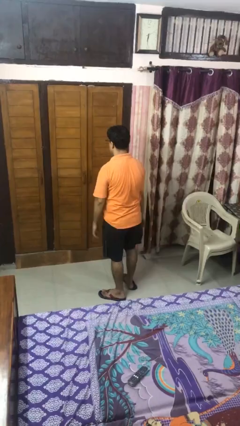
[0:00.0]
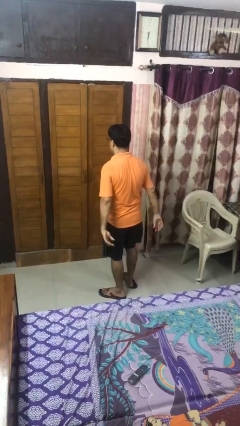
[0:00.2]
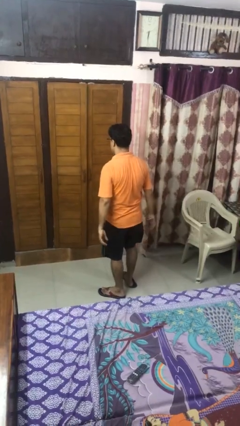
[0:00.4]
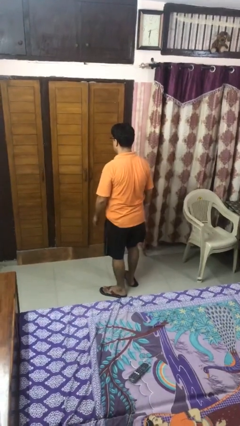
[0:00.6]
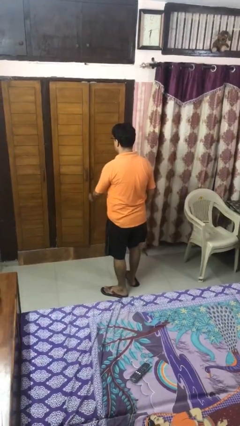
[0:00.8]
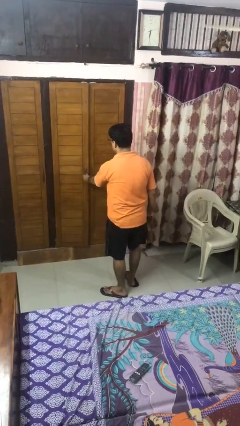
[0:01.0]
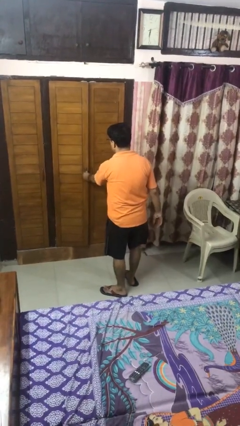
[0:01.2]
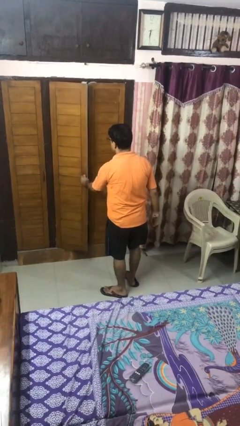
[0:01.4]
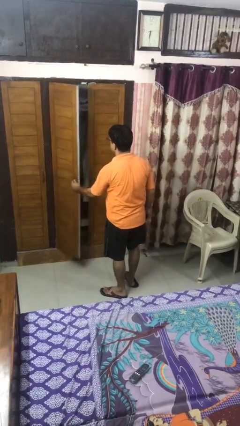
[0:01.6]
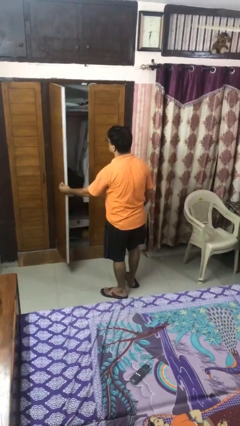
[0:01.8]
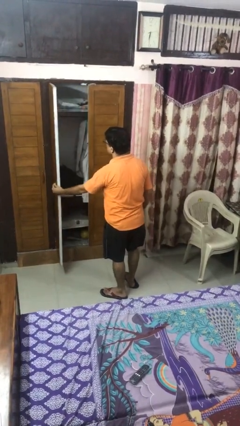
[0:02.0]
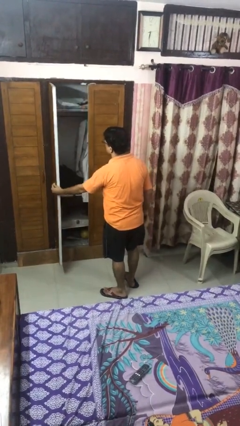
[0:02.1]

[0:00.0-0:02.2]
person opens closet door

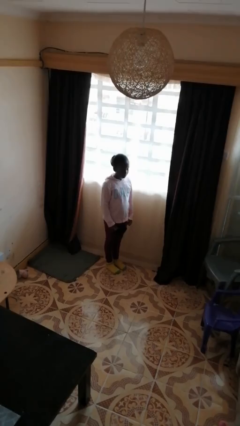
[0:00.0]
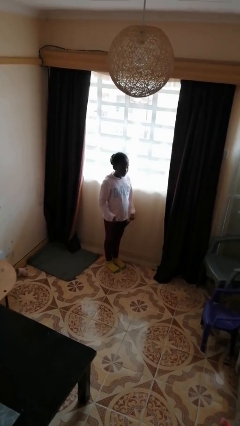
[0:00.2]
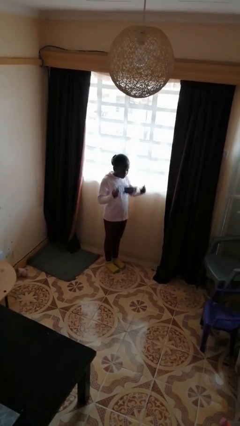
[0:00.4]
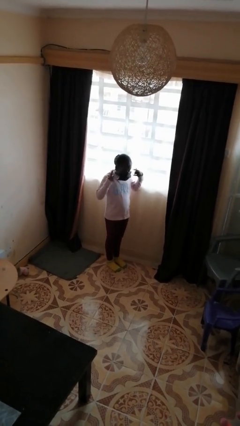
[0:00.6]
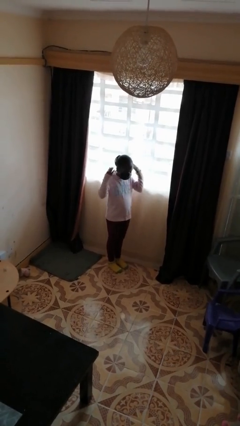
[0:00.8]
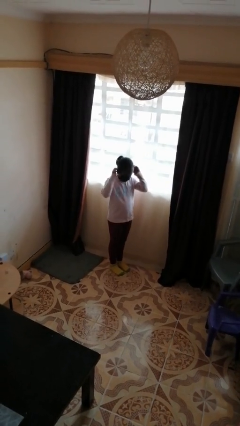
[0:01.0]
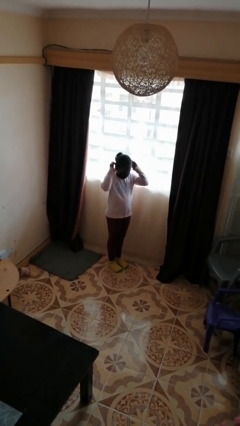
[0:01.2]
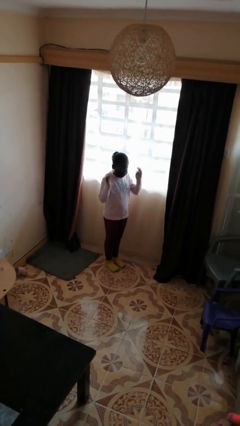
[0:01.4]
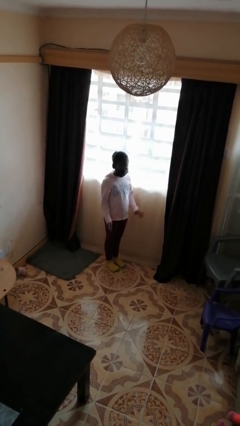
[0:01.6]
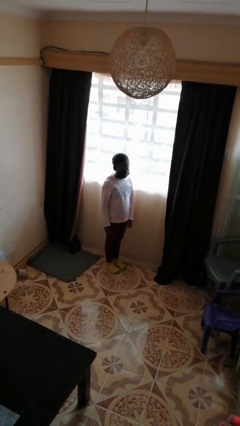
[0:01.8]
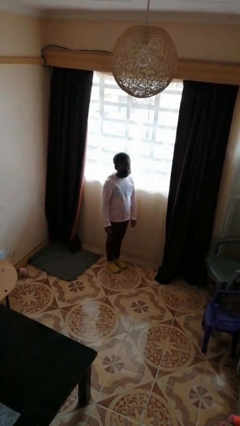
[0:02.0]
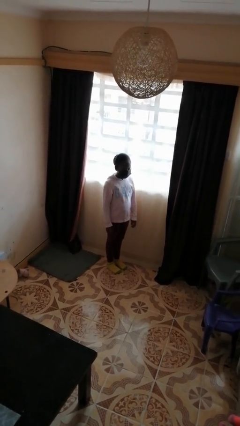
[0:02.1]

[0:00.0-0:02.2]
person puts on facemask

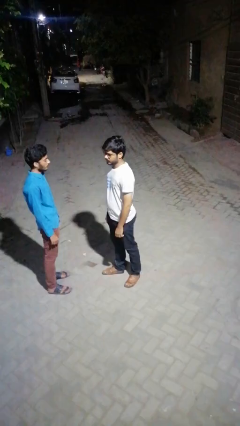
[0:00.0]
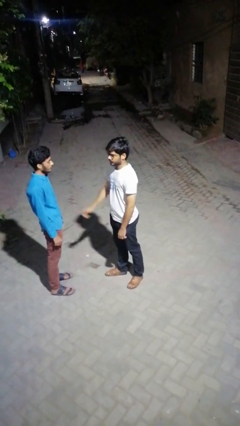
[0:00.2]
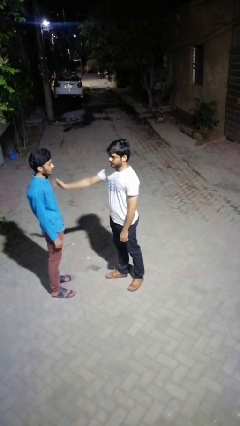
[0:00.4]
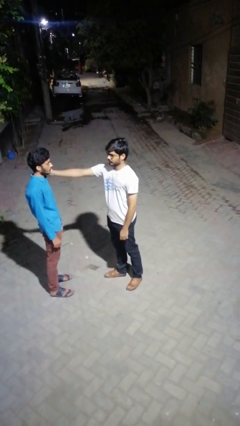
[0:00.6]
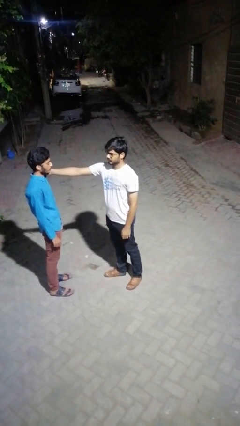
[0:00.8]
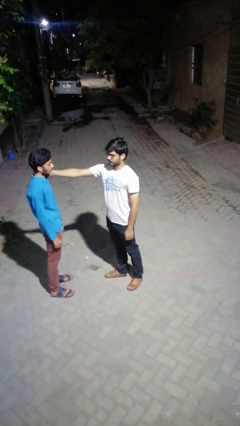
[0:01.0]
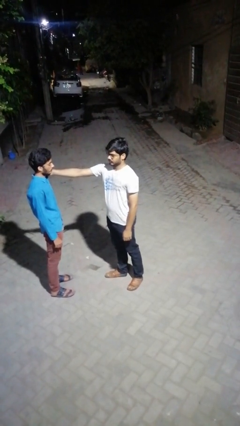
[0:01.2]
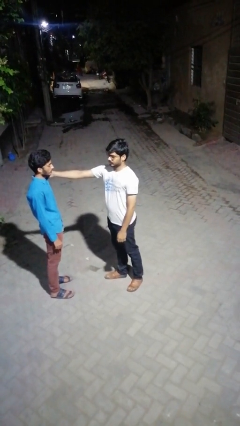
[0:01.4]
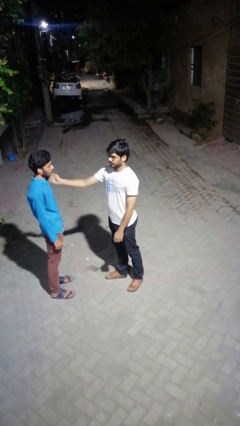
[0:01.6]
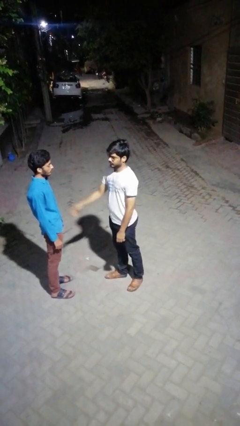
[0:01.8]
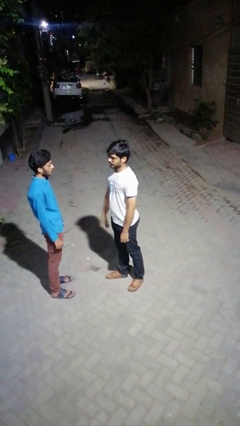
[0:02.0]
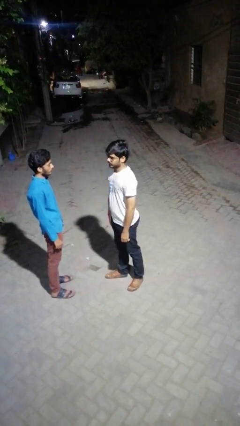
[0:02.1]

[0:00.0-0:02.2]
person touches face of person

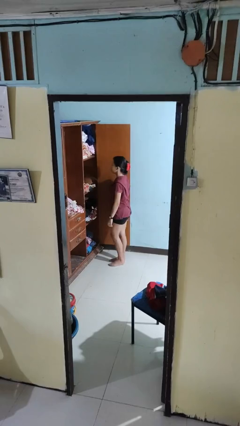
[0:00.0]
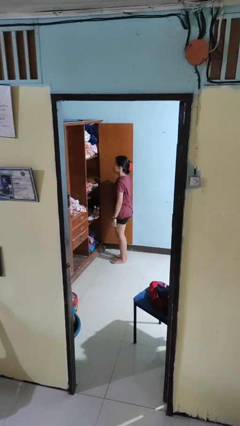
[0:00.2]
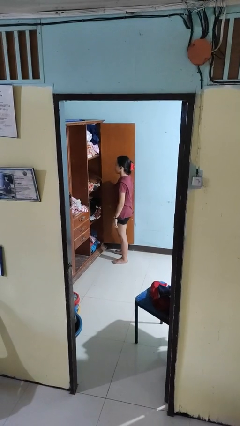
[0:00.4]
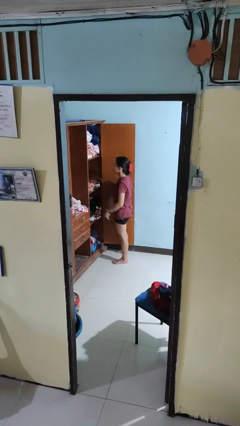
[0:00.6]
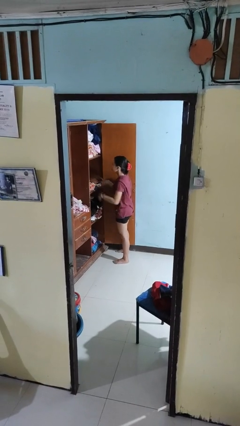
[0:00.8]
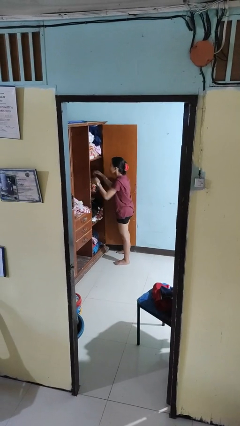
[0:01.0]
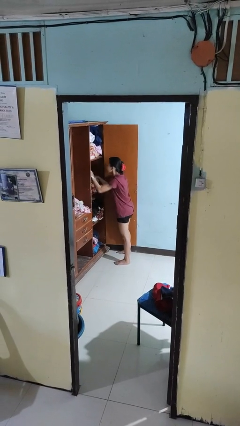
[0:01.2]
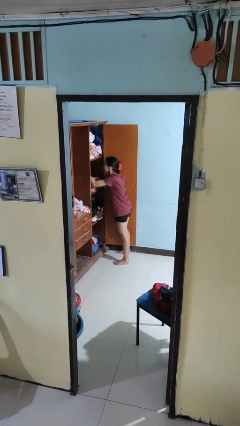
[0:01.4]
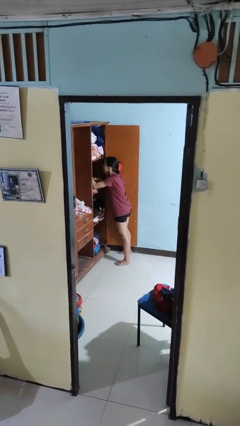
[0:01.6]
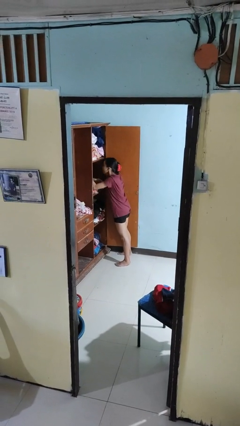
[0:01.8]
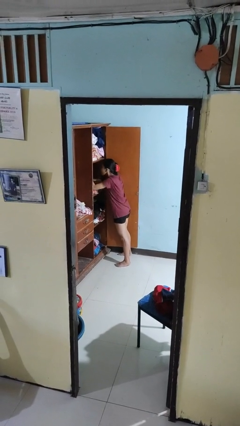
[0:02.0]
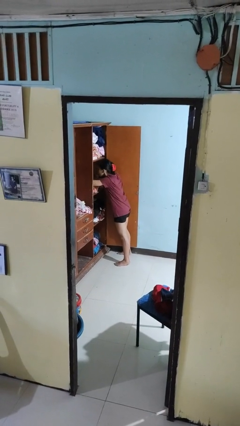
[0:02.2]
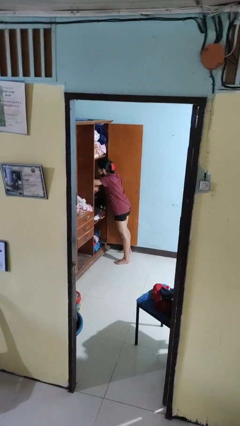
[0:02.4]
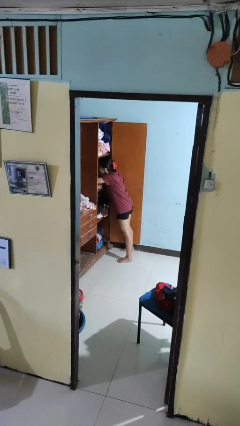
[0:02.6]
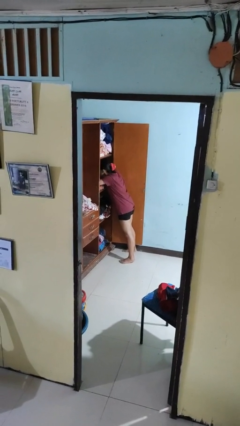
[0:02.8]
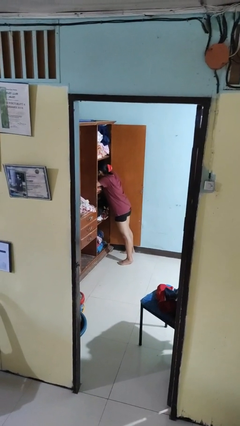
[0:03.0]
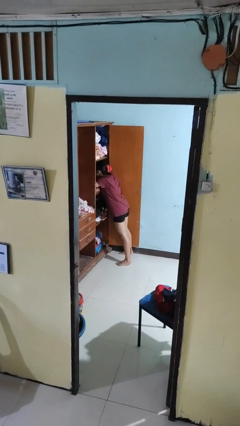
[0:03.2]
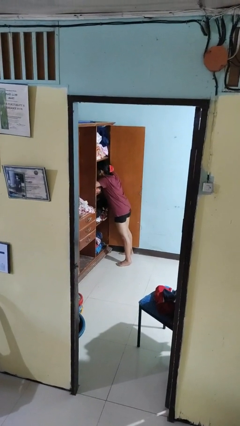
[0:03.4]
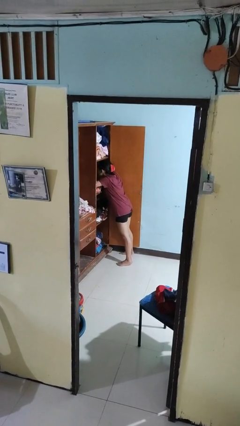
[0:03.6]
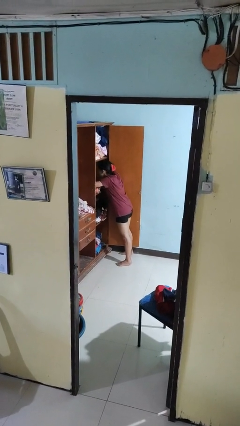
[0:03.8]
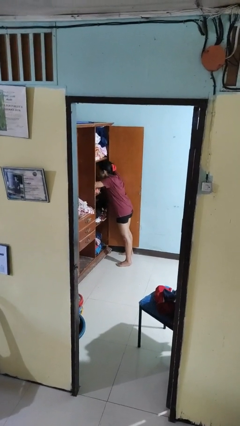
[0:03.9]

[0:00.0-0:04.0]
person searches in cabinet

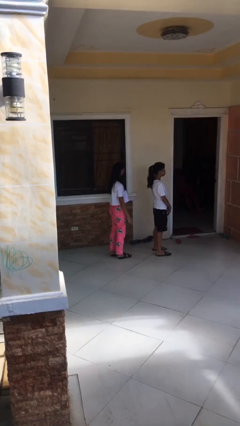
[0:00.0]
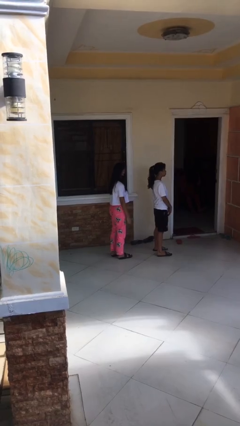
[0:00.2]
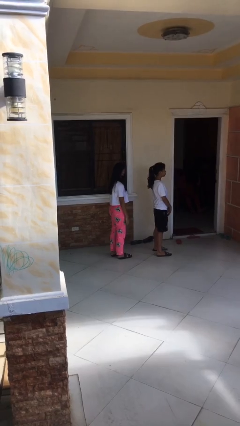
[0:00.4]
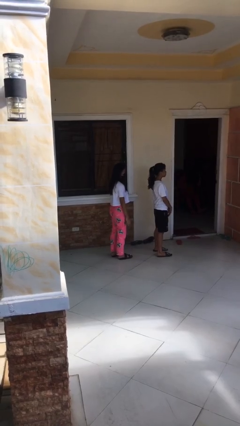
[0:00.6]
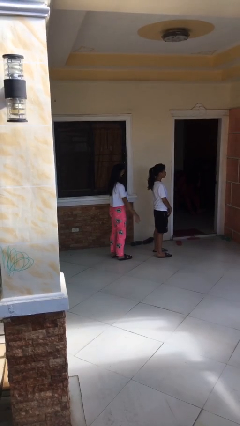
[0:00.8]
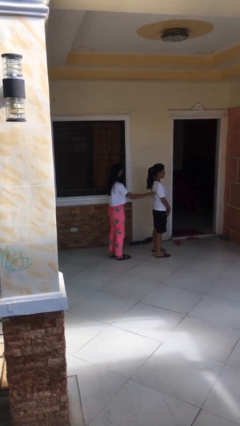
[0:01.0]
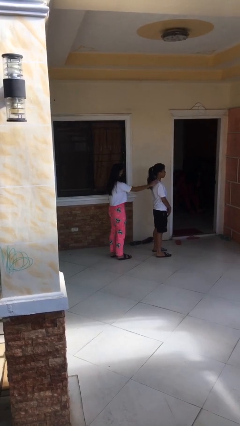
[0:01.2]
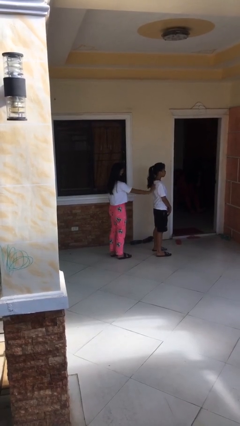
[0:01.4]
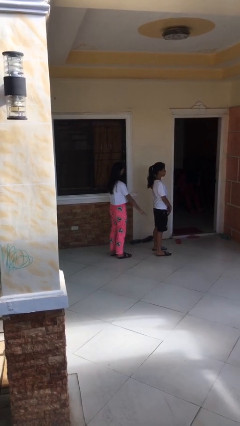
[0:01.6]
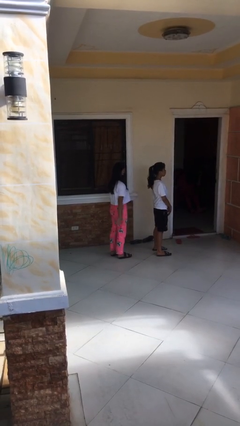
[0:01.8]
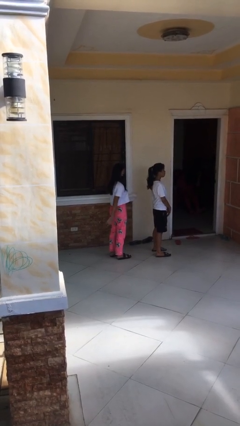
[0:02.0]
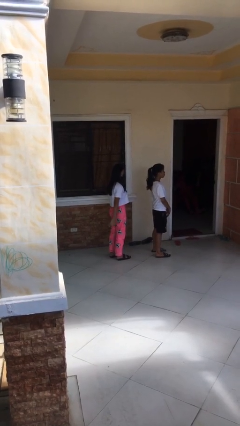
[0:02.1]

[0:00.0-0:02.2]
person touches back of person

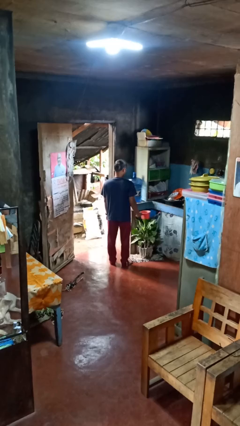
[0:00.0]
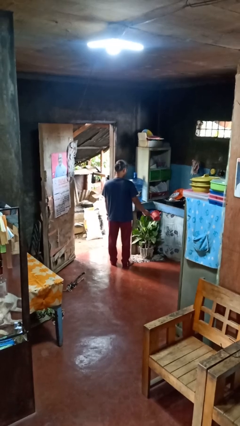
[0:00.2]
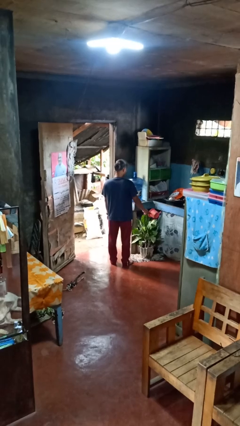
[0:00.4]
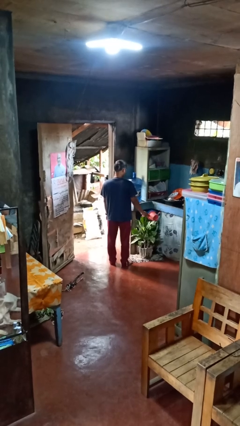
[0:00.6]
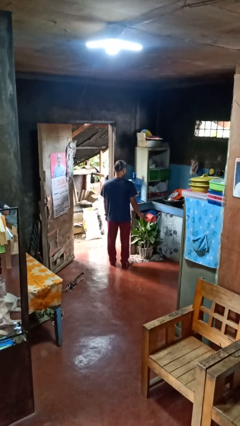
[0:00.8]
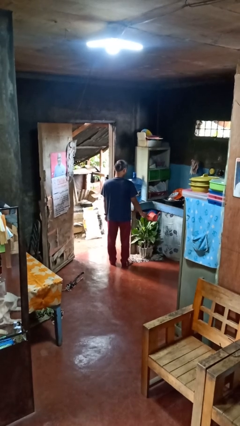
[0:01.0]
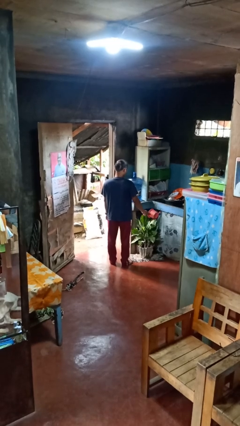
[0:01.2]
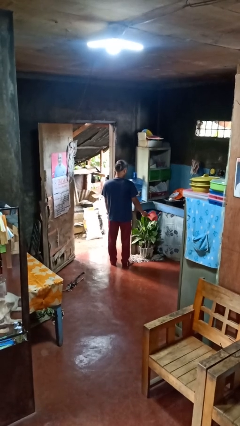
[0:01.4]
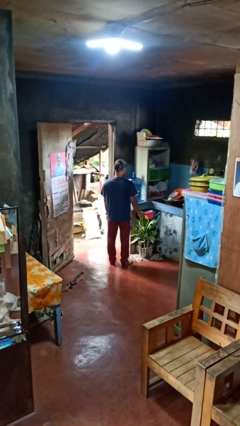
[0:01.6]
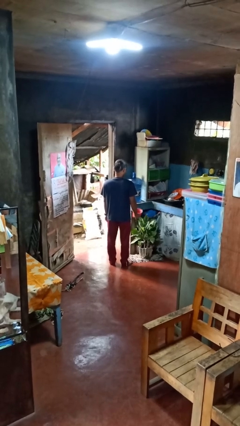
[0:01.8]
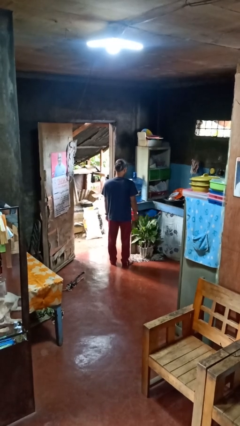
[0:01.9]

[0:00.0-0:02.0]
person waters houseplant

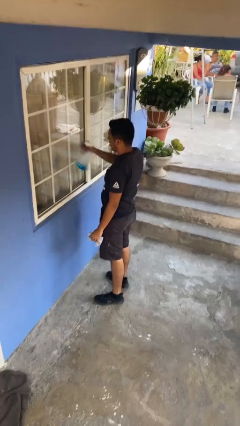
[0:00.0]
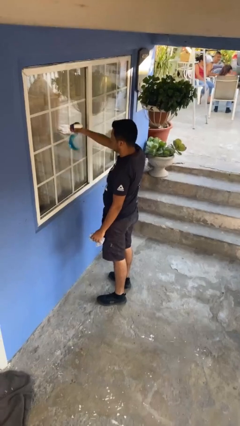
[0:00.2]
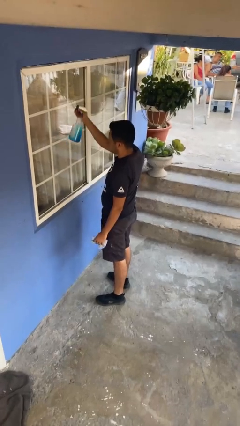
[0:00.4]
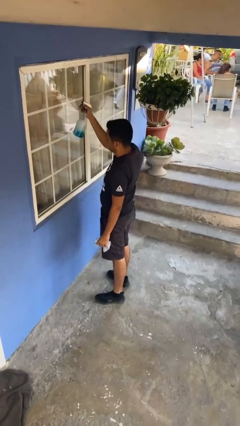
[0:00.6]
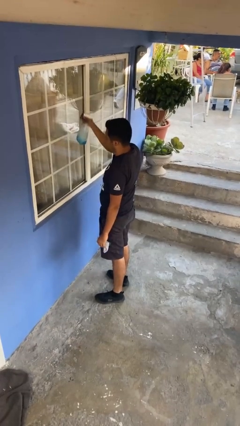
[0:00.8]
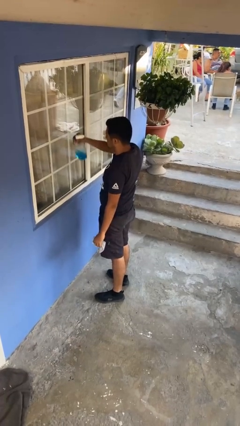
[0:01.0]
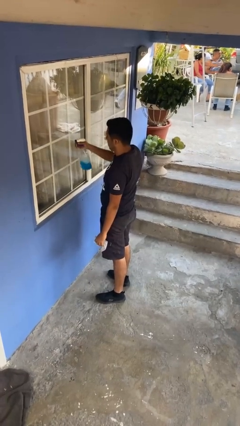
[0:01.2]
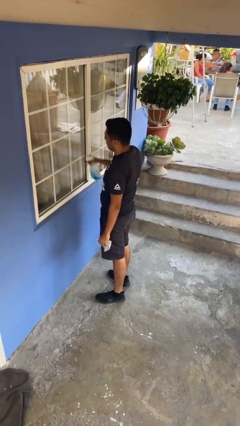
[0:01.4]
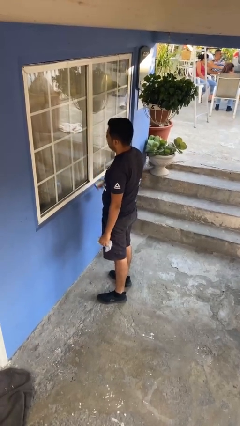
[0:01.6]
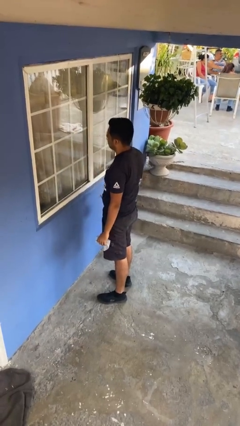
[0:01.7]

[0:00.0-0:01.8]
person sprays from bottle

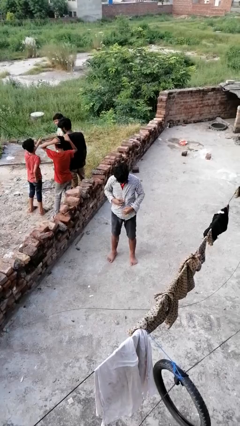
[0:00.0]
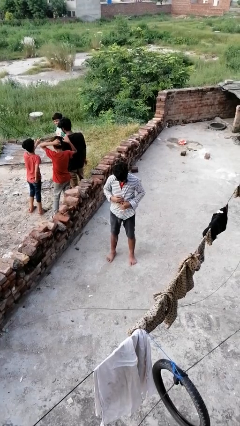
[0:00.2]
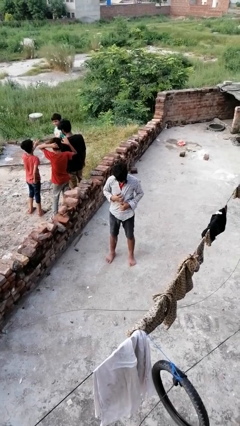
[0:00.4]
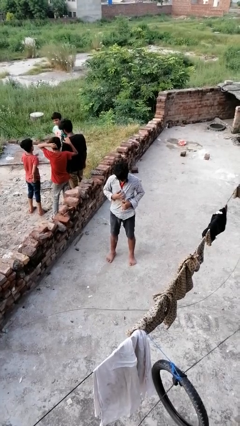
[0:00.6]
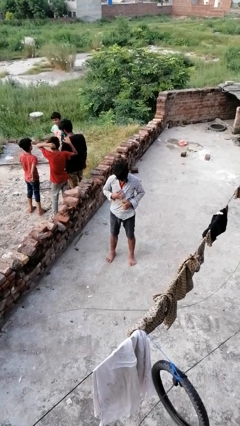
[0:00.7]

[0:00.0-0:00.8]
person takes off shirt
